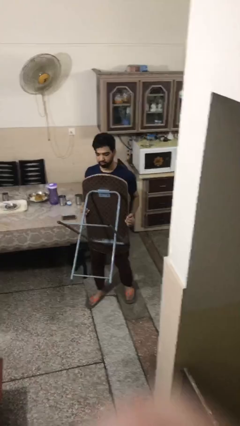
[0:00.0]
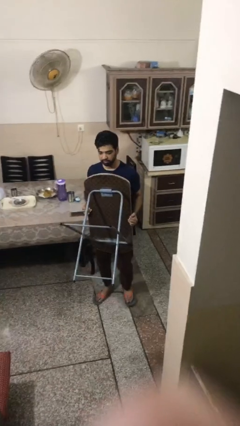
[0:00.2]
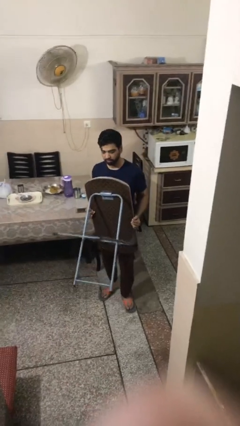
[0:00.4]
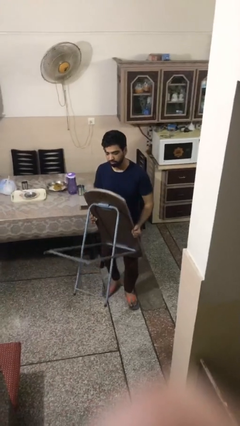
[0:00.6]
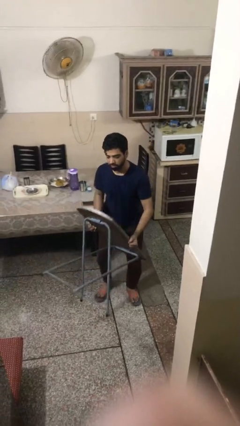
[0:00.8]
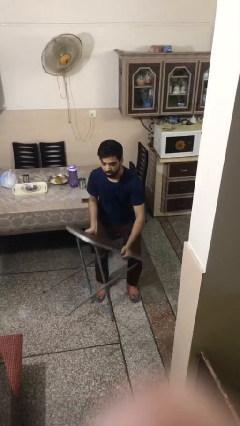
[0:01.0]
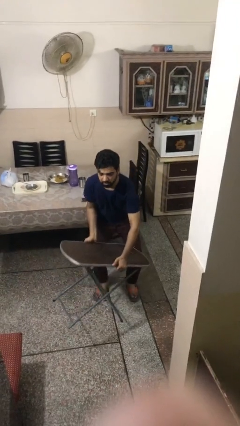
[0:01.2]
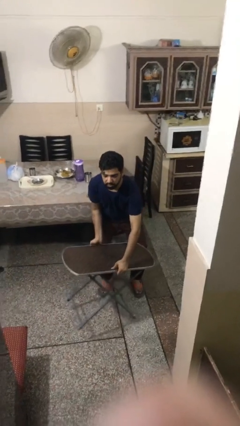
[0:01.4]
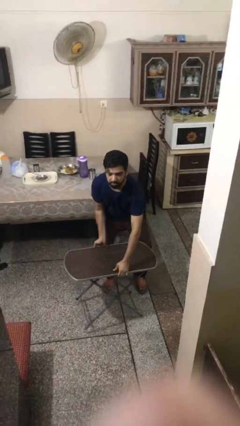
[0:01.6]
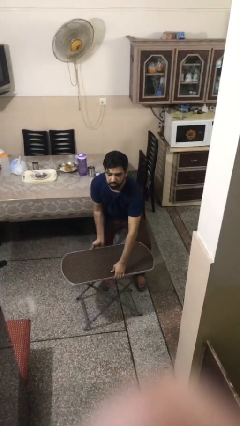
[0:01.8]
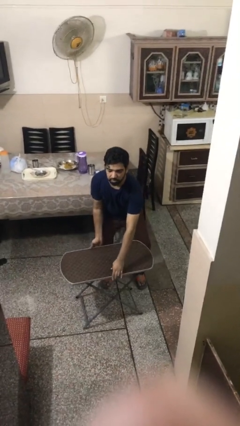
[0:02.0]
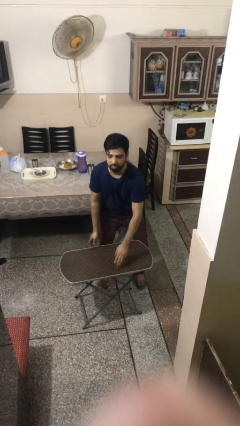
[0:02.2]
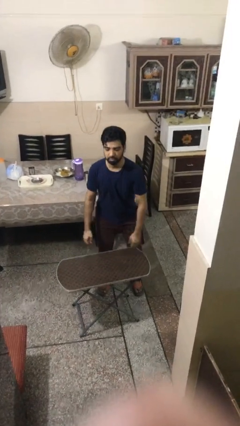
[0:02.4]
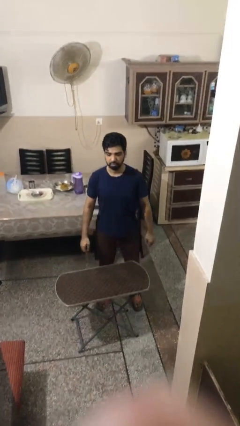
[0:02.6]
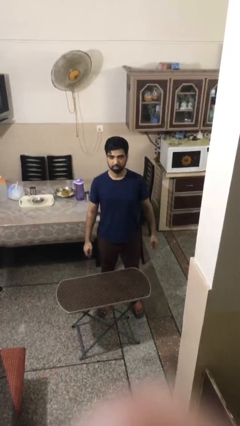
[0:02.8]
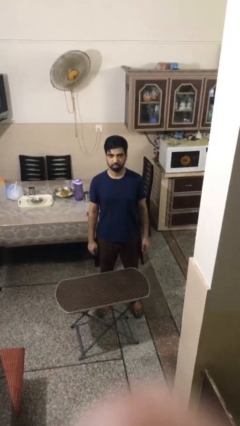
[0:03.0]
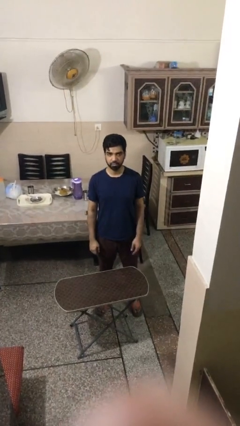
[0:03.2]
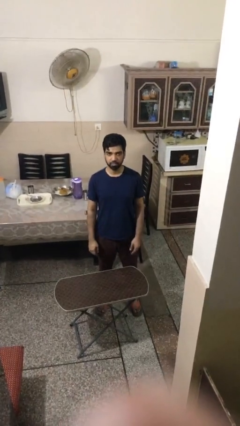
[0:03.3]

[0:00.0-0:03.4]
person puts down object on floor

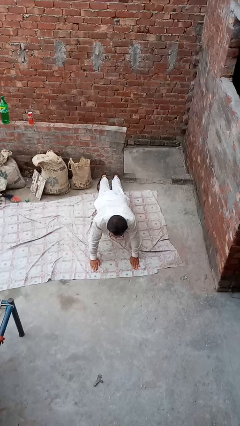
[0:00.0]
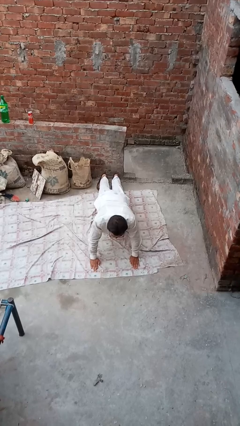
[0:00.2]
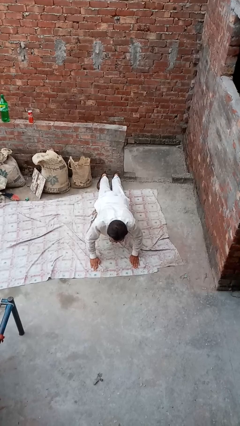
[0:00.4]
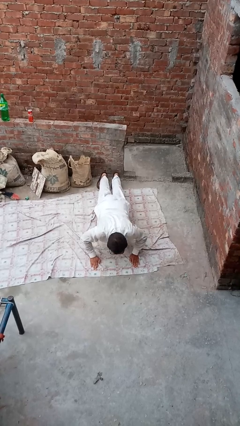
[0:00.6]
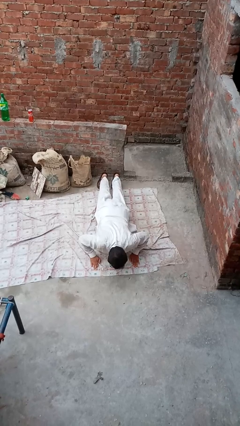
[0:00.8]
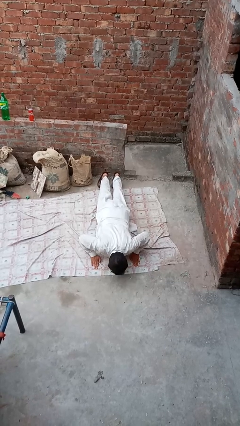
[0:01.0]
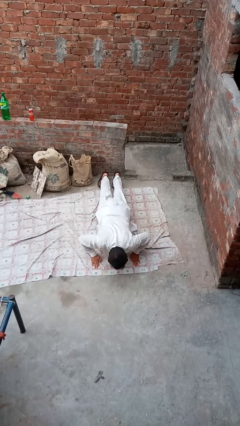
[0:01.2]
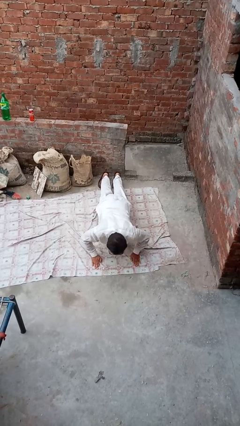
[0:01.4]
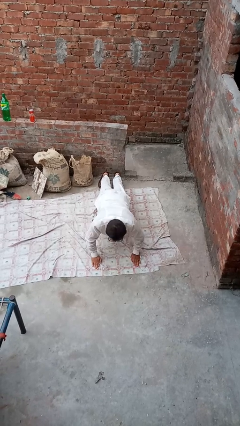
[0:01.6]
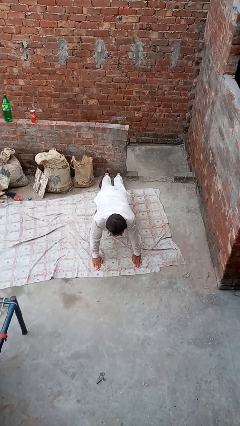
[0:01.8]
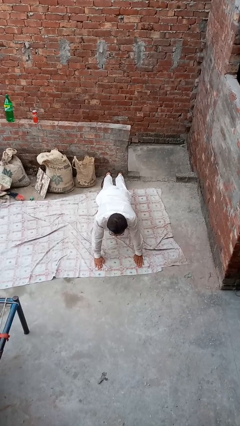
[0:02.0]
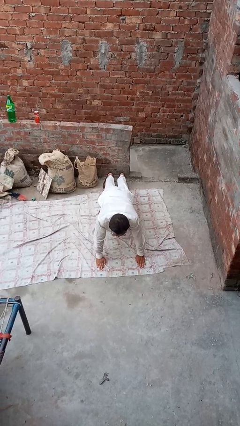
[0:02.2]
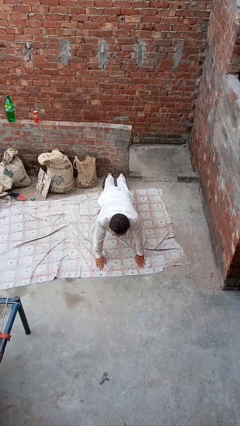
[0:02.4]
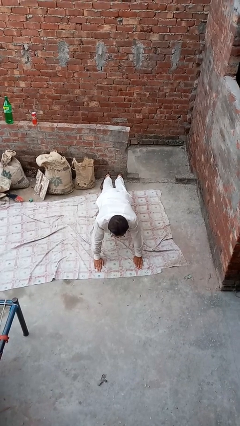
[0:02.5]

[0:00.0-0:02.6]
person exercises with situp

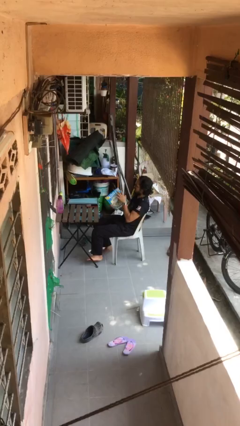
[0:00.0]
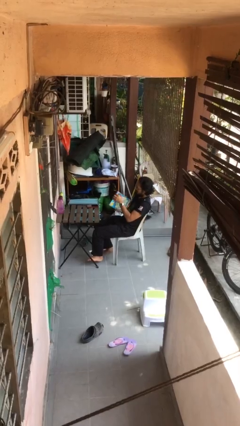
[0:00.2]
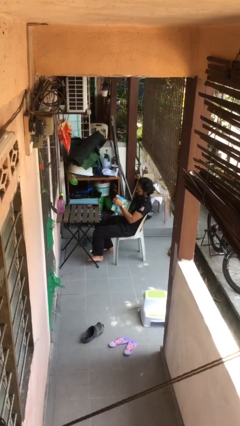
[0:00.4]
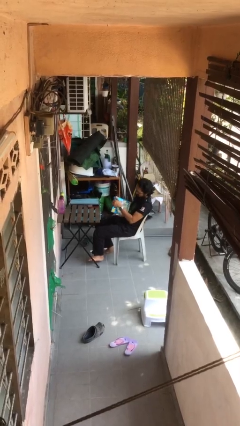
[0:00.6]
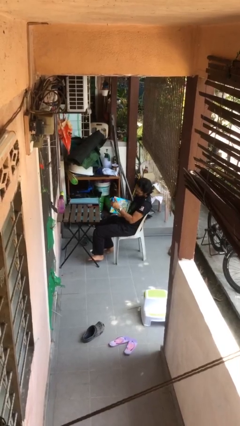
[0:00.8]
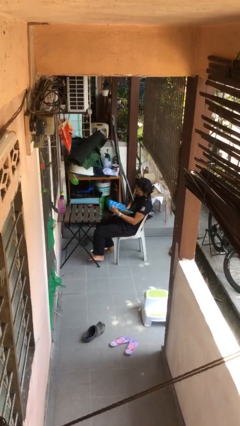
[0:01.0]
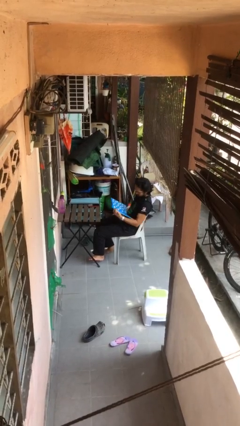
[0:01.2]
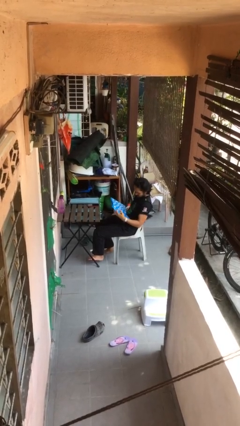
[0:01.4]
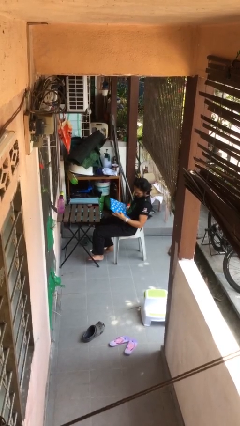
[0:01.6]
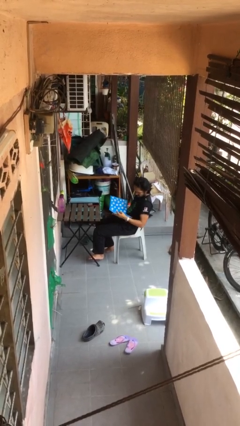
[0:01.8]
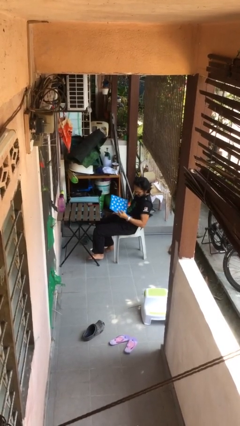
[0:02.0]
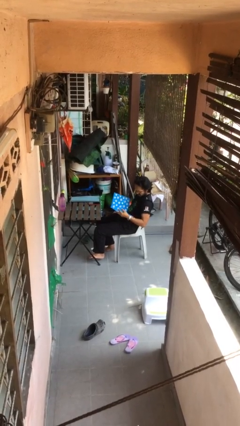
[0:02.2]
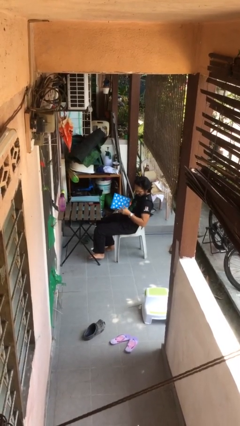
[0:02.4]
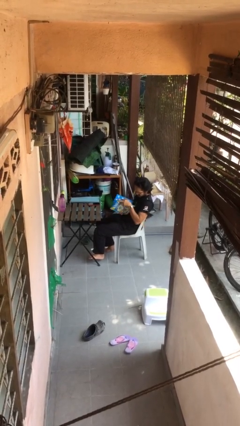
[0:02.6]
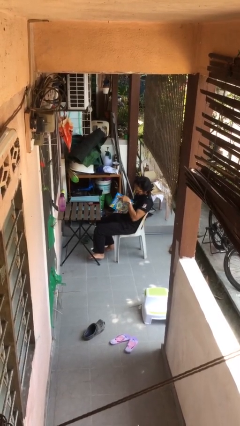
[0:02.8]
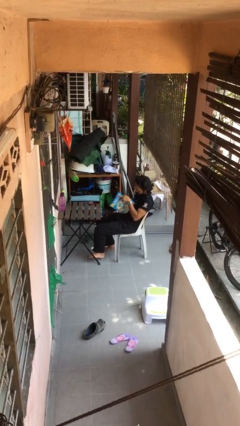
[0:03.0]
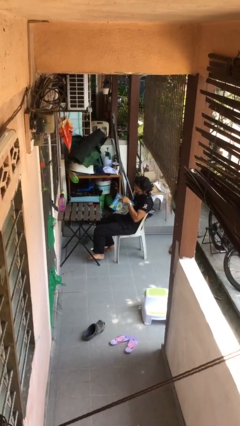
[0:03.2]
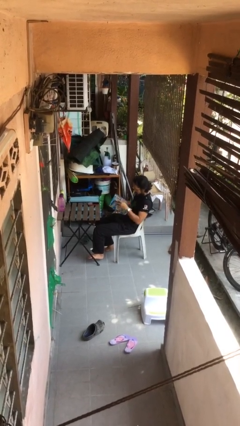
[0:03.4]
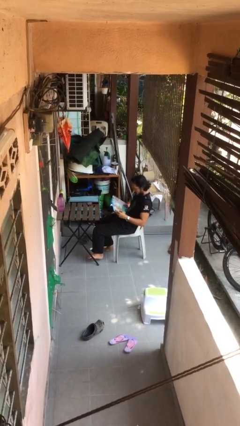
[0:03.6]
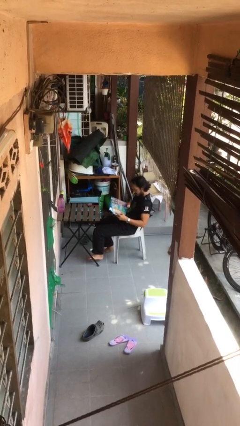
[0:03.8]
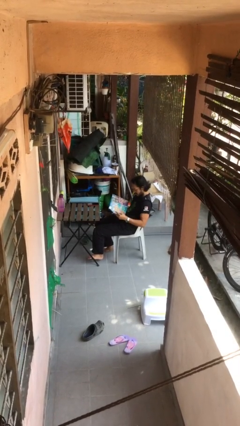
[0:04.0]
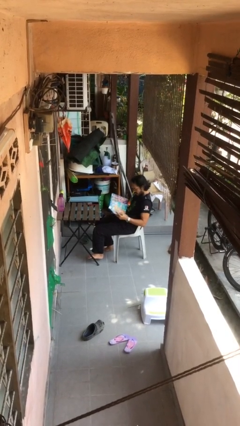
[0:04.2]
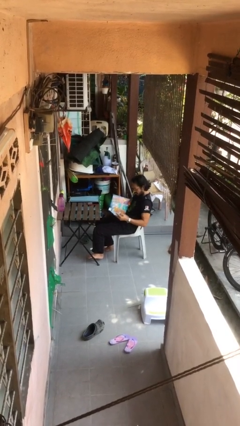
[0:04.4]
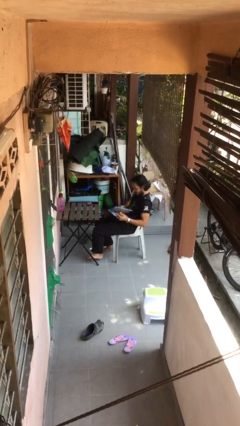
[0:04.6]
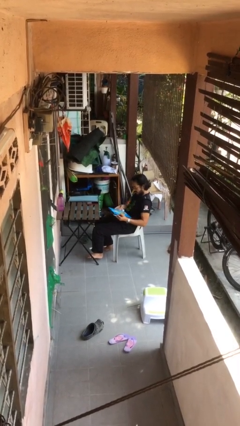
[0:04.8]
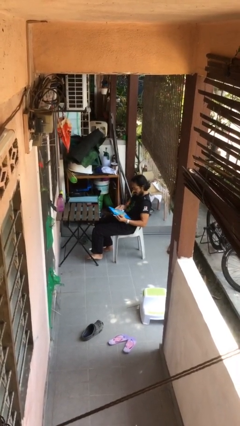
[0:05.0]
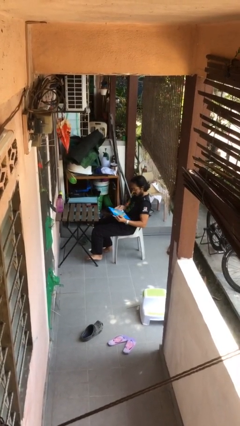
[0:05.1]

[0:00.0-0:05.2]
person reads document

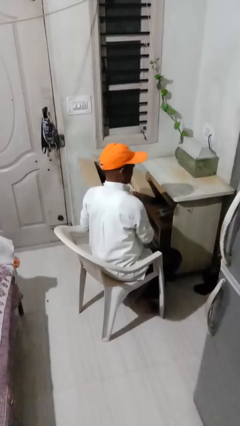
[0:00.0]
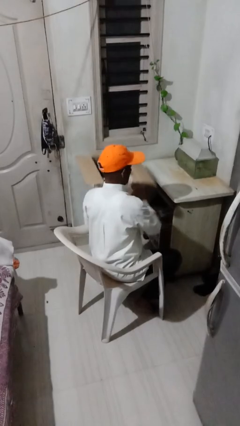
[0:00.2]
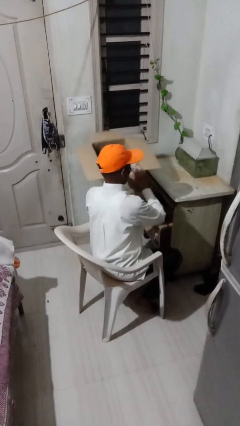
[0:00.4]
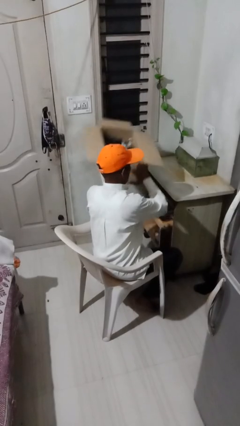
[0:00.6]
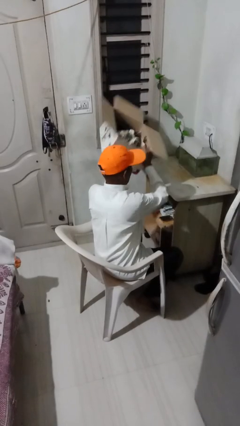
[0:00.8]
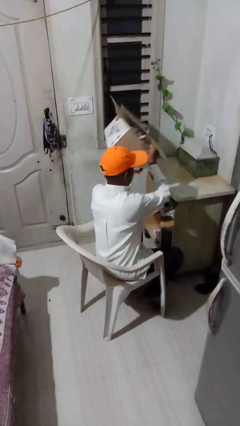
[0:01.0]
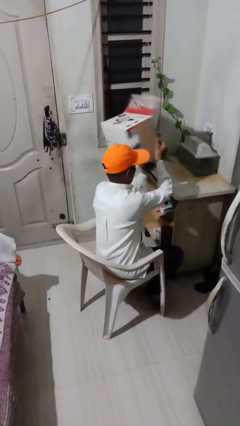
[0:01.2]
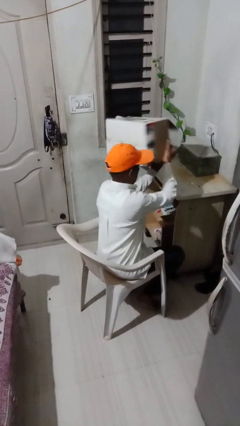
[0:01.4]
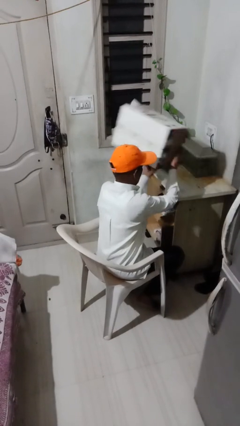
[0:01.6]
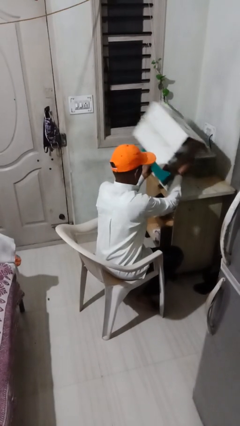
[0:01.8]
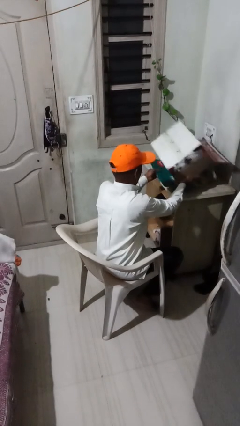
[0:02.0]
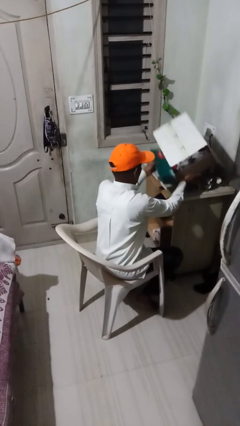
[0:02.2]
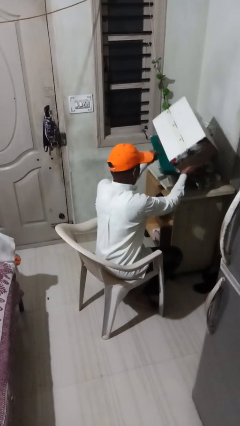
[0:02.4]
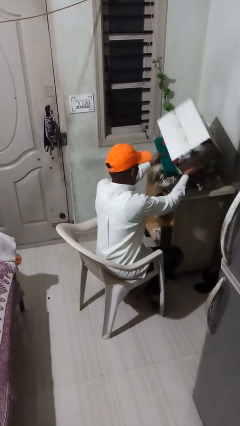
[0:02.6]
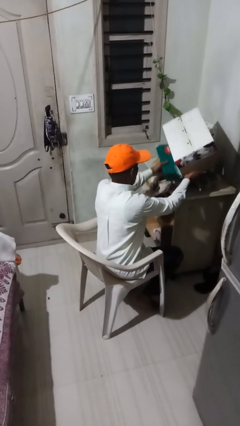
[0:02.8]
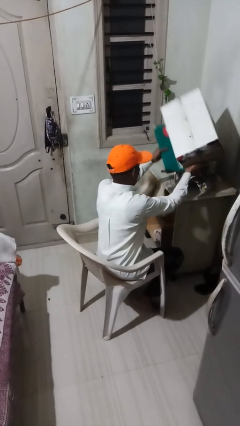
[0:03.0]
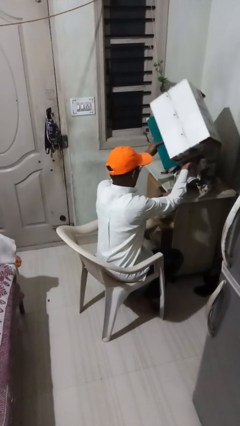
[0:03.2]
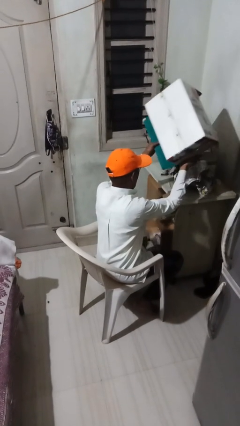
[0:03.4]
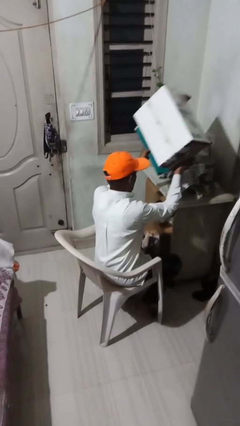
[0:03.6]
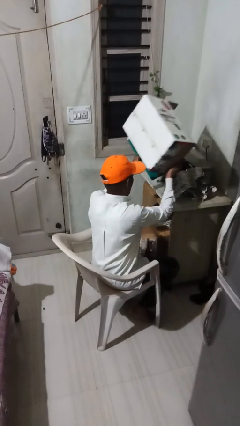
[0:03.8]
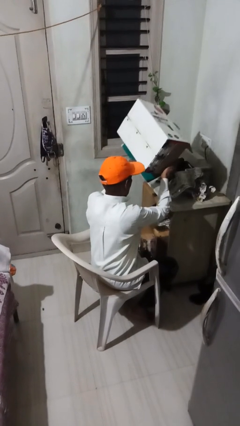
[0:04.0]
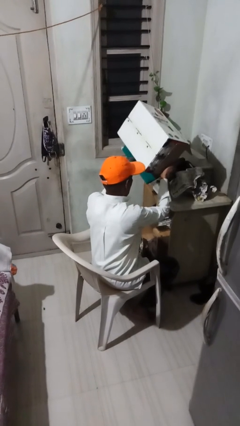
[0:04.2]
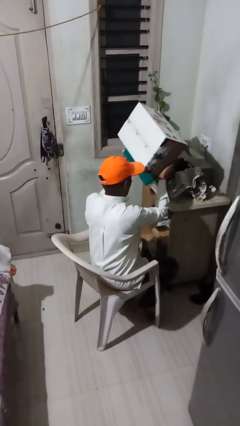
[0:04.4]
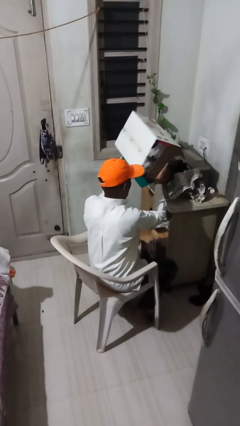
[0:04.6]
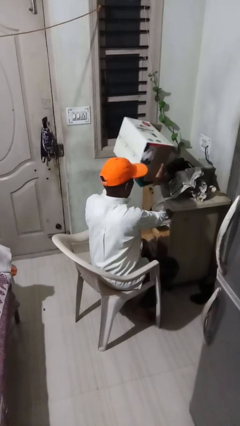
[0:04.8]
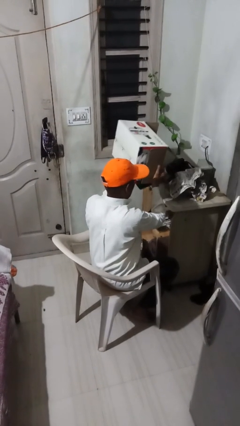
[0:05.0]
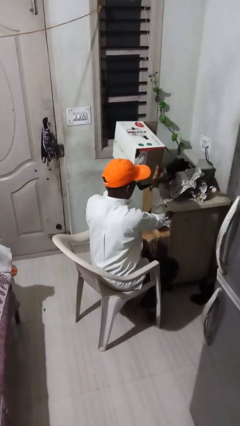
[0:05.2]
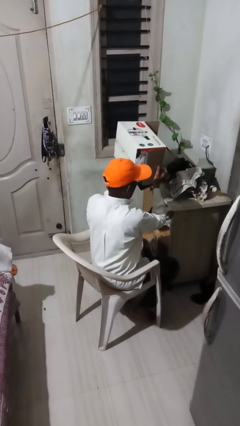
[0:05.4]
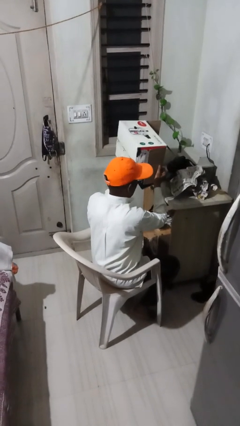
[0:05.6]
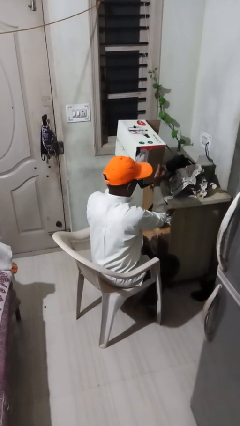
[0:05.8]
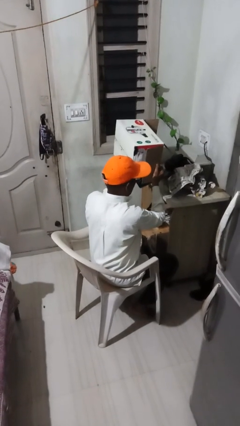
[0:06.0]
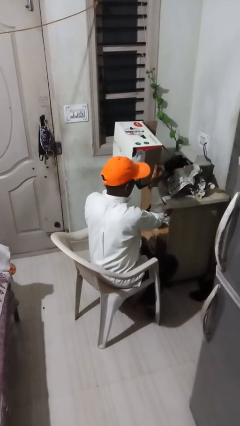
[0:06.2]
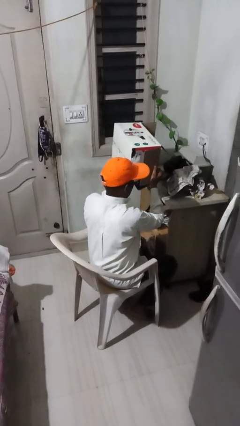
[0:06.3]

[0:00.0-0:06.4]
person unloads box onto table

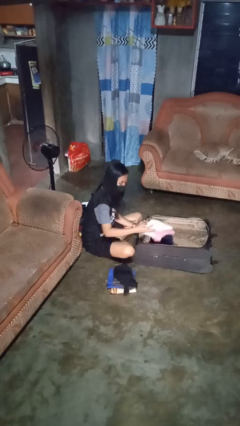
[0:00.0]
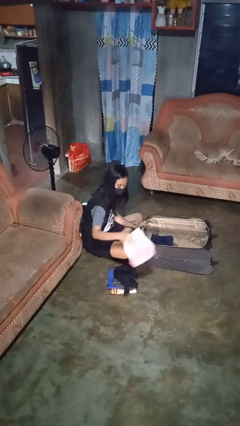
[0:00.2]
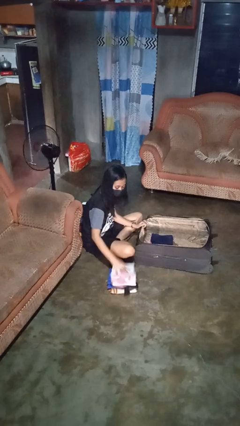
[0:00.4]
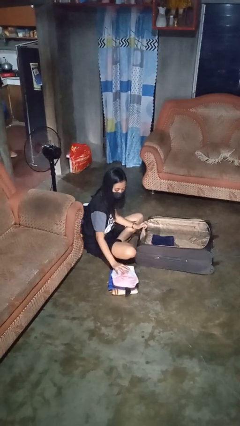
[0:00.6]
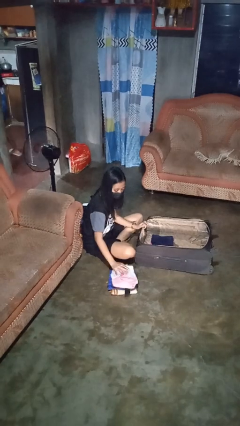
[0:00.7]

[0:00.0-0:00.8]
person unloads clothes from suitcase
